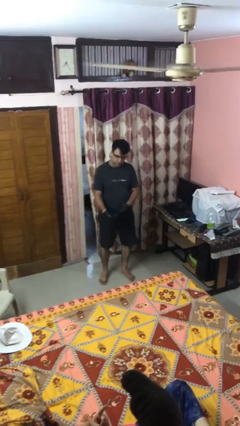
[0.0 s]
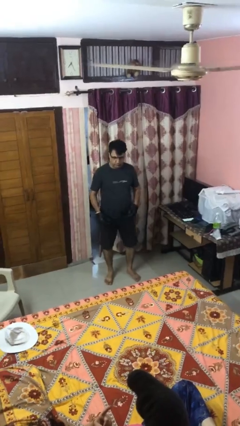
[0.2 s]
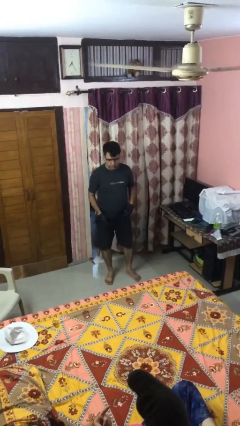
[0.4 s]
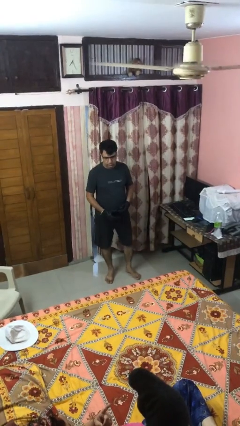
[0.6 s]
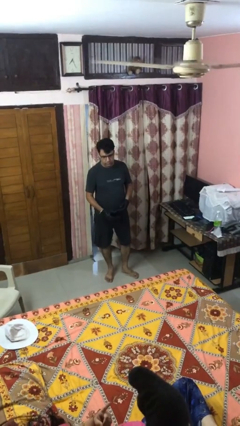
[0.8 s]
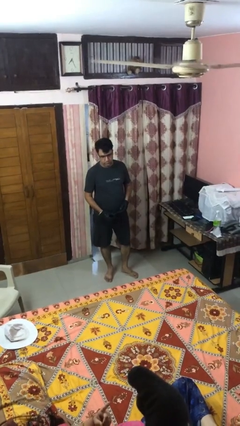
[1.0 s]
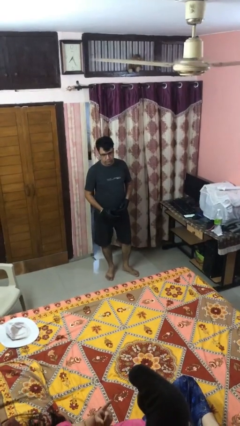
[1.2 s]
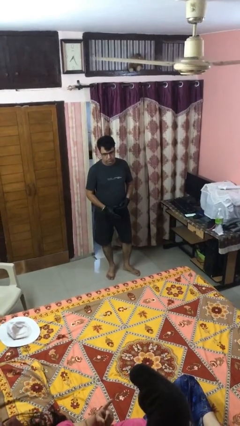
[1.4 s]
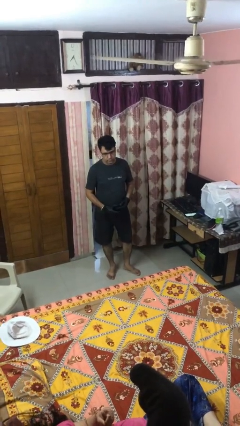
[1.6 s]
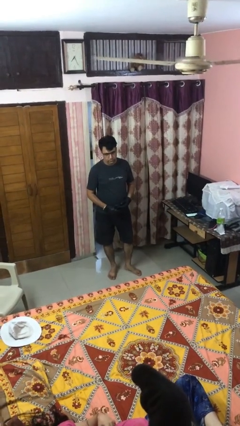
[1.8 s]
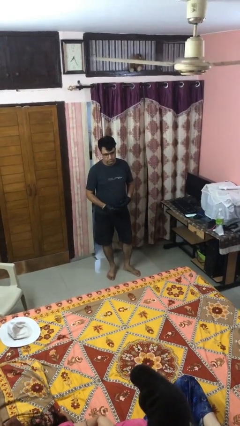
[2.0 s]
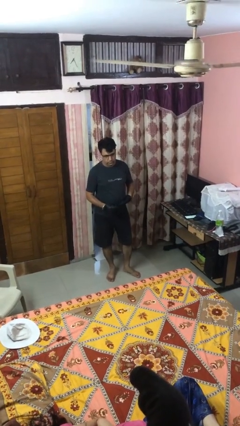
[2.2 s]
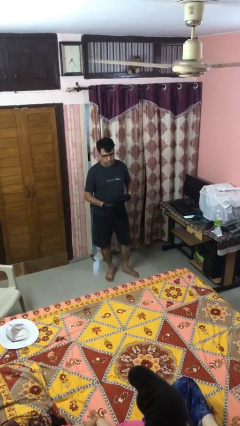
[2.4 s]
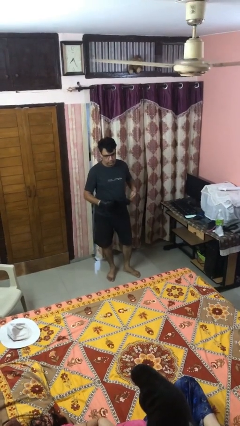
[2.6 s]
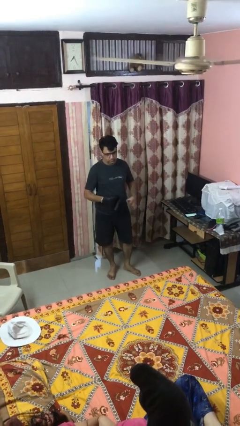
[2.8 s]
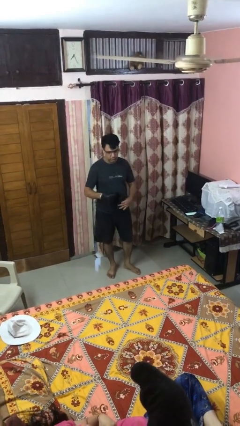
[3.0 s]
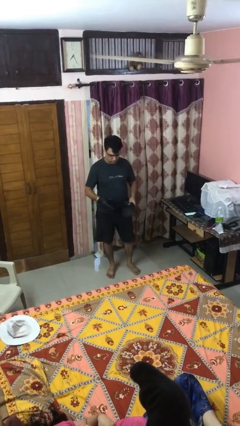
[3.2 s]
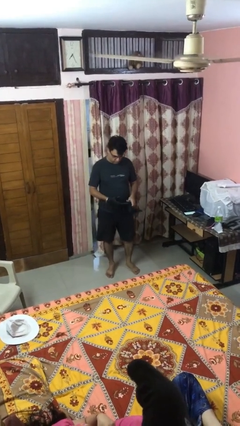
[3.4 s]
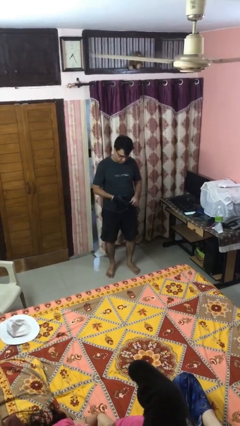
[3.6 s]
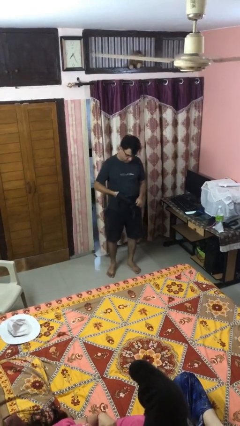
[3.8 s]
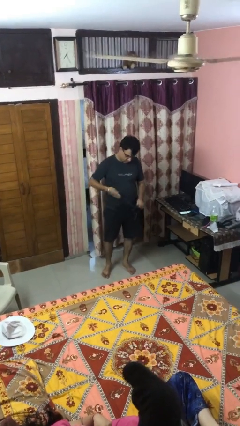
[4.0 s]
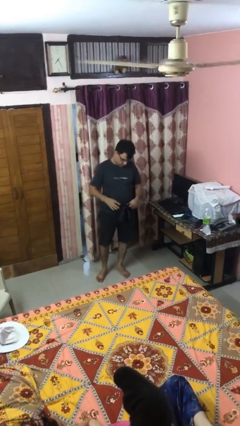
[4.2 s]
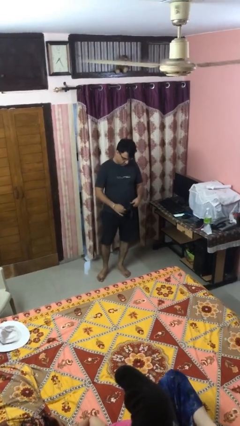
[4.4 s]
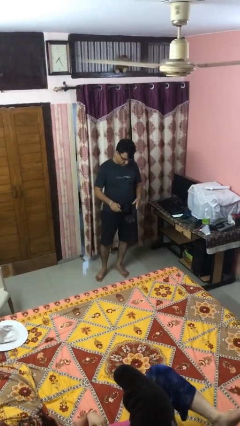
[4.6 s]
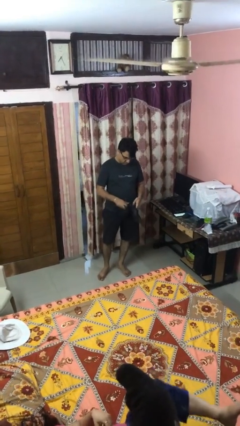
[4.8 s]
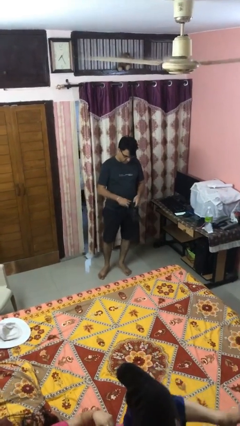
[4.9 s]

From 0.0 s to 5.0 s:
person takes off gloves

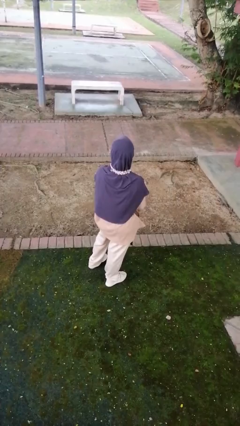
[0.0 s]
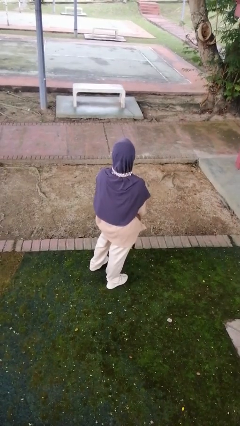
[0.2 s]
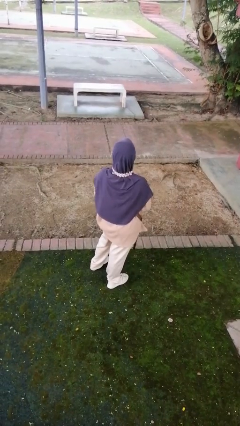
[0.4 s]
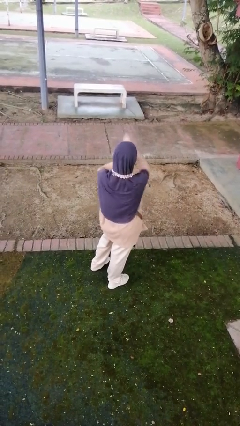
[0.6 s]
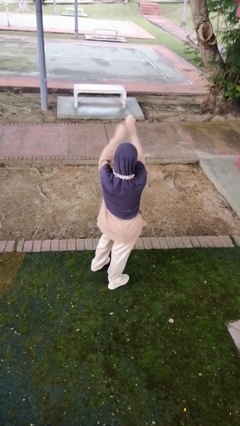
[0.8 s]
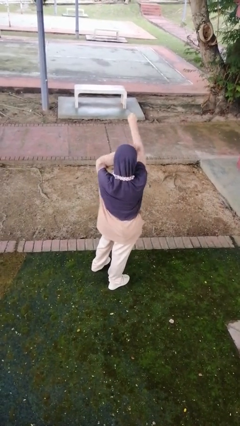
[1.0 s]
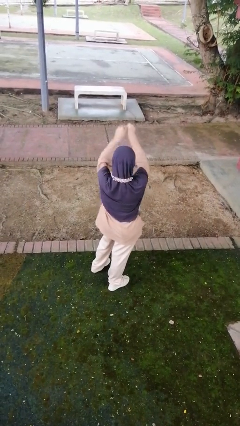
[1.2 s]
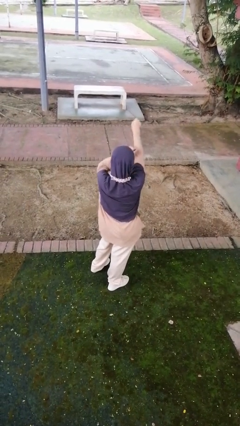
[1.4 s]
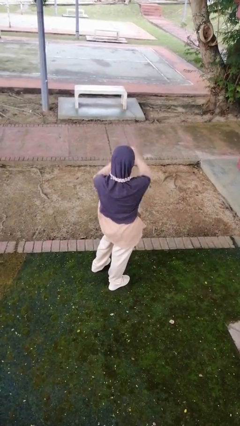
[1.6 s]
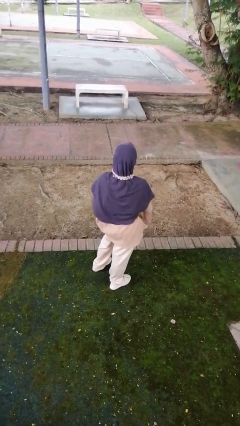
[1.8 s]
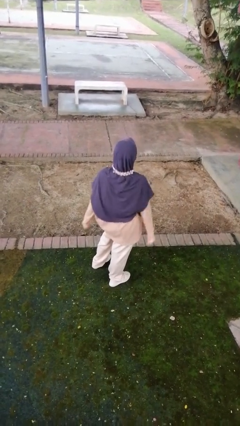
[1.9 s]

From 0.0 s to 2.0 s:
person punches

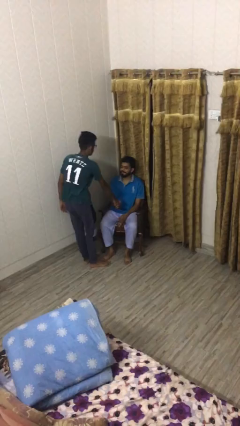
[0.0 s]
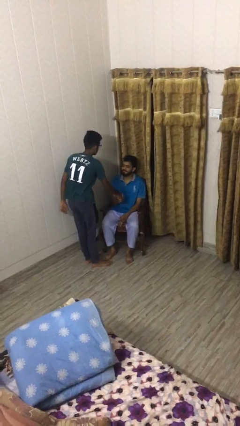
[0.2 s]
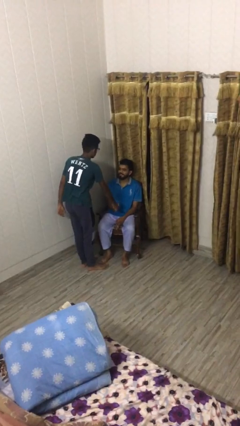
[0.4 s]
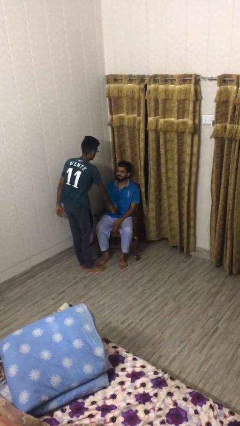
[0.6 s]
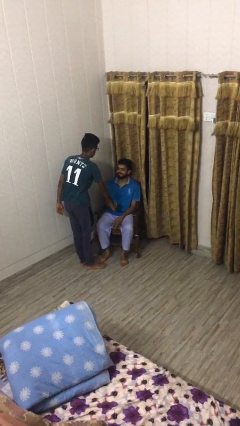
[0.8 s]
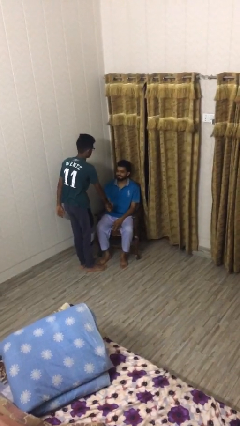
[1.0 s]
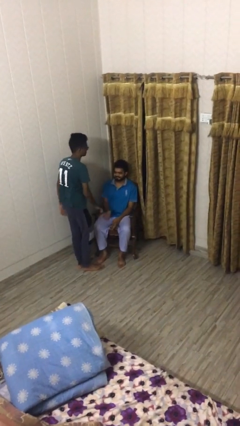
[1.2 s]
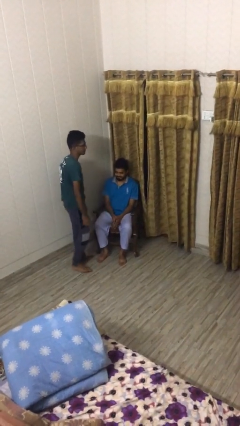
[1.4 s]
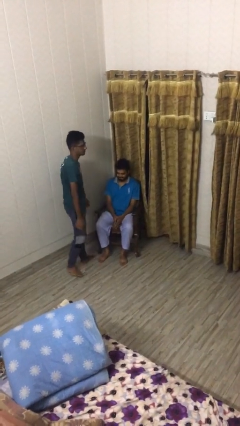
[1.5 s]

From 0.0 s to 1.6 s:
person shakes hand

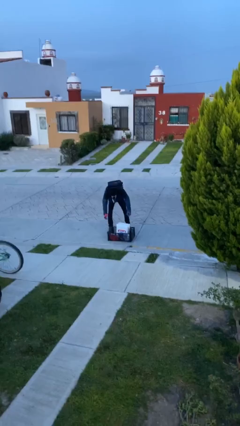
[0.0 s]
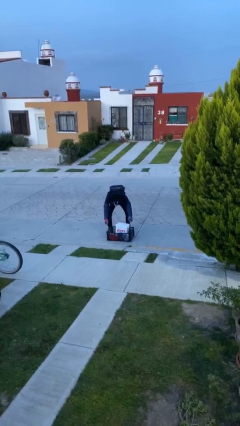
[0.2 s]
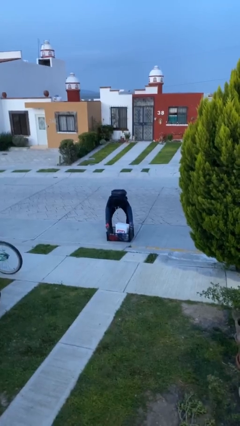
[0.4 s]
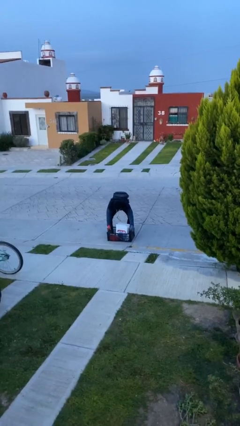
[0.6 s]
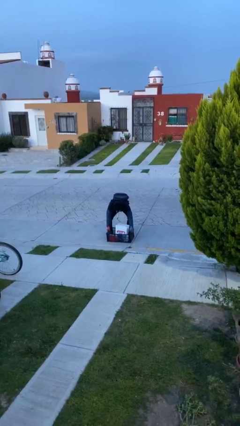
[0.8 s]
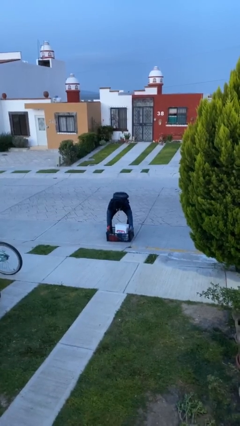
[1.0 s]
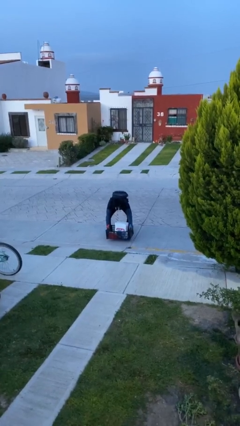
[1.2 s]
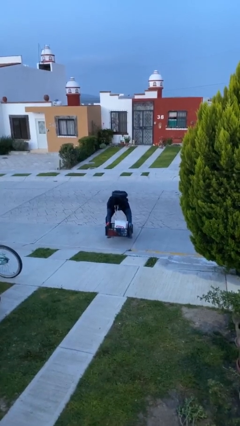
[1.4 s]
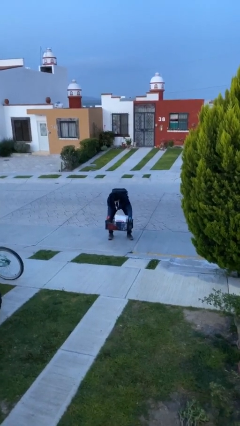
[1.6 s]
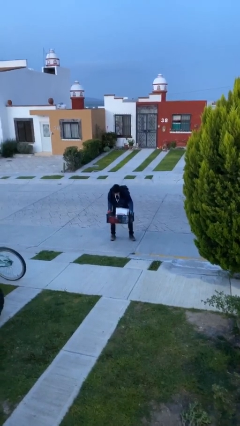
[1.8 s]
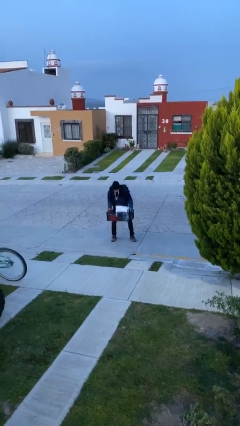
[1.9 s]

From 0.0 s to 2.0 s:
person picks up object from floor

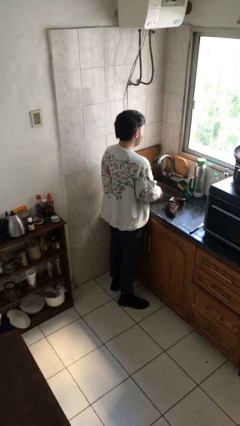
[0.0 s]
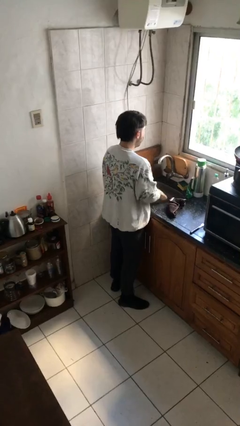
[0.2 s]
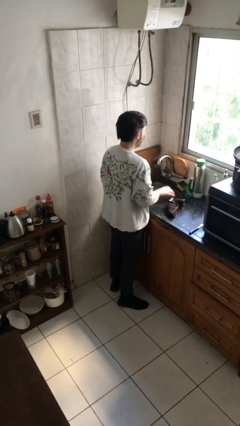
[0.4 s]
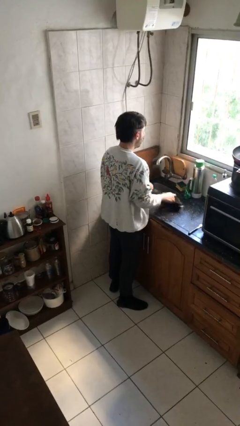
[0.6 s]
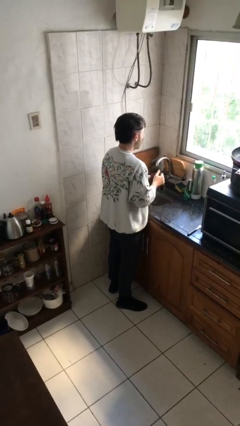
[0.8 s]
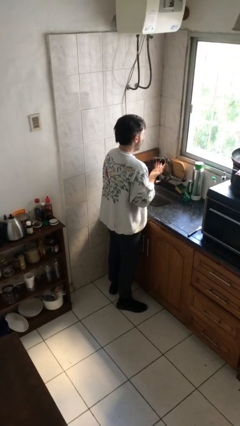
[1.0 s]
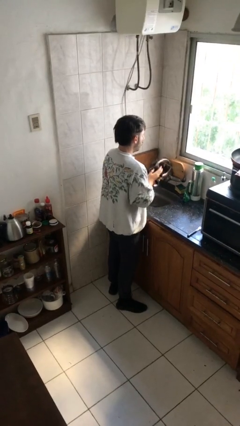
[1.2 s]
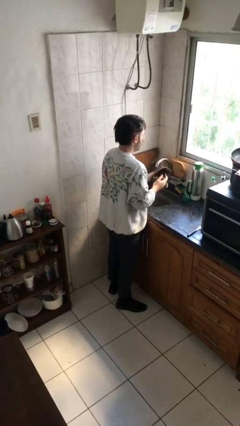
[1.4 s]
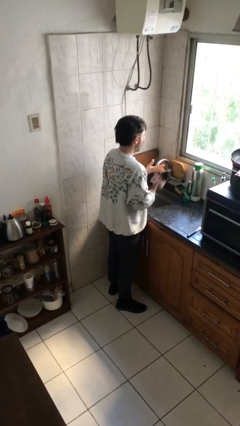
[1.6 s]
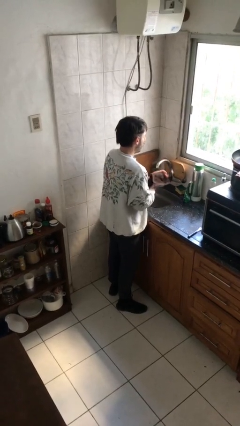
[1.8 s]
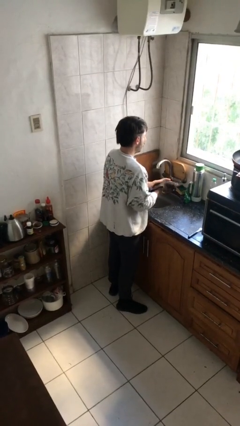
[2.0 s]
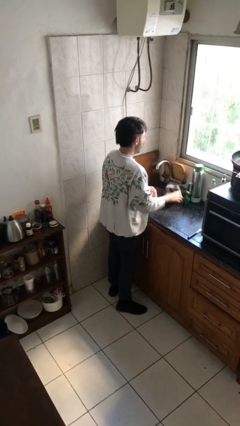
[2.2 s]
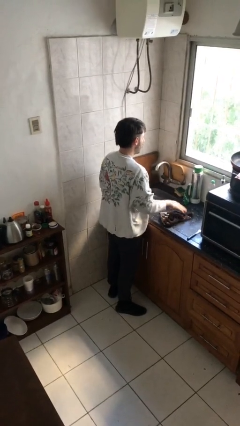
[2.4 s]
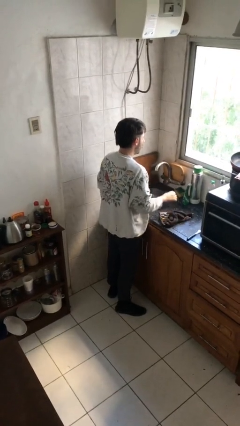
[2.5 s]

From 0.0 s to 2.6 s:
person dries hands with towel

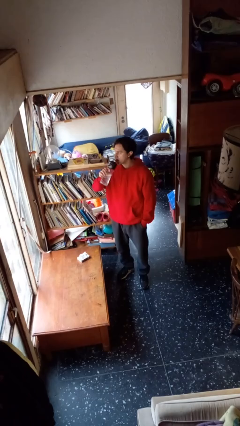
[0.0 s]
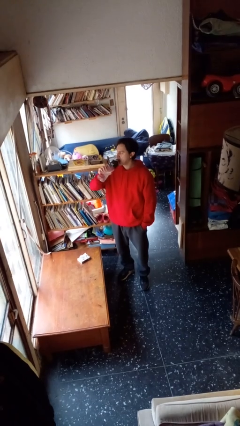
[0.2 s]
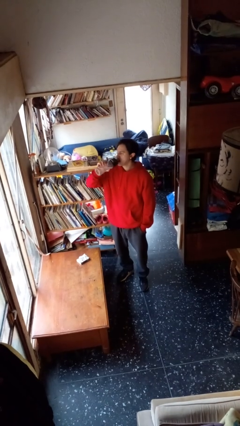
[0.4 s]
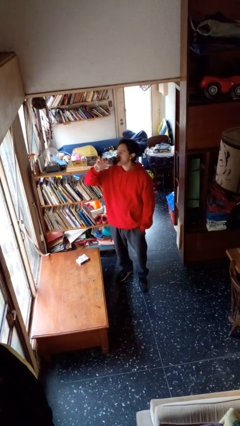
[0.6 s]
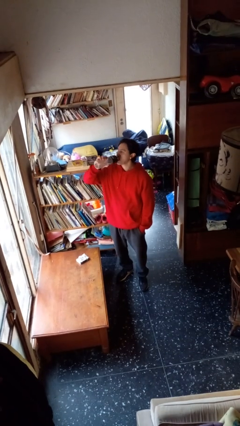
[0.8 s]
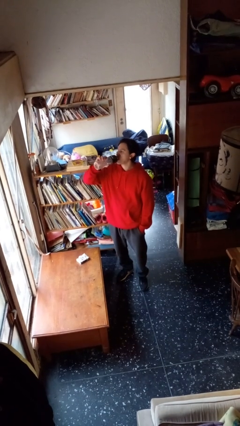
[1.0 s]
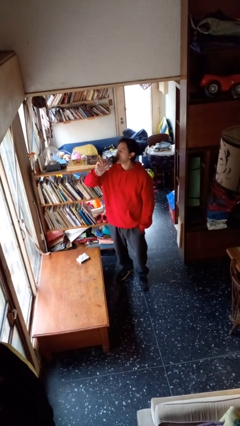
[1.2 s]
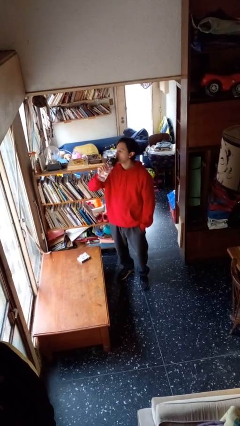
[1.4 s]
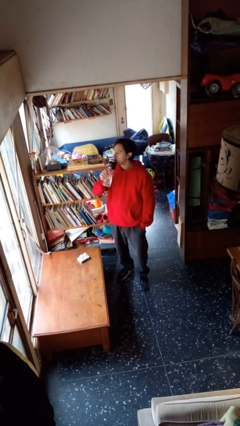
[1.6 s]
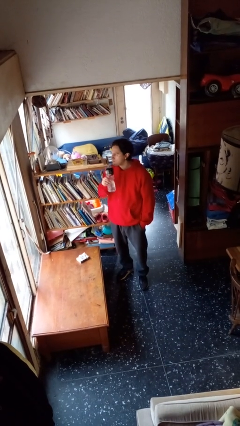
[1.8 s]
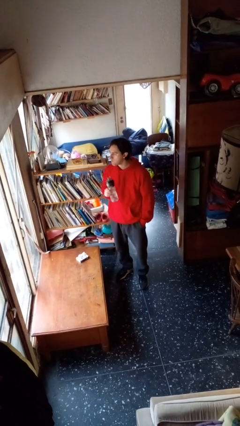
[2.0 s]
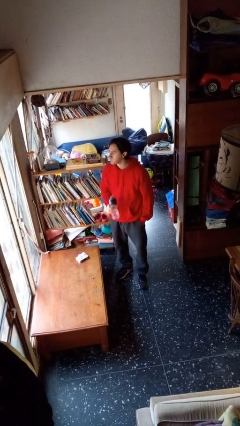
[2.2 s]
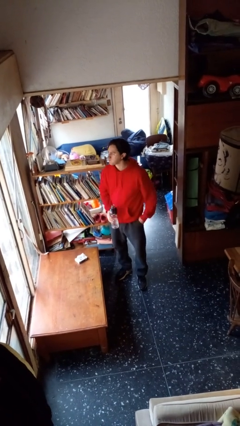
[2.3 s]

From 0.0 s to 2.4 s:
person drinks from bottle

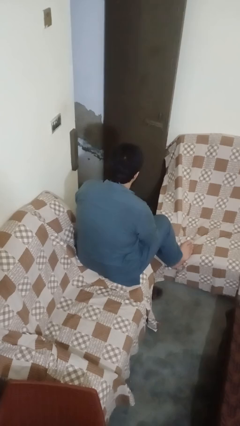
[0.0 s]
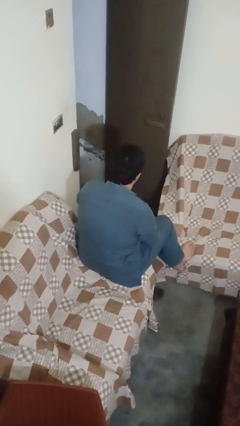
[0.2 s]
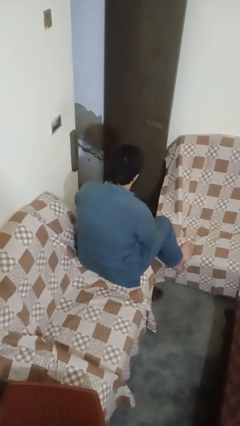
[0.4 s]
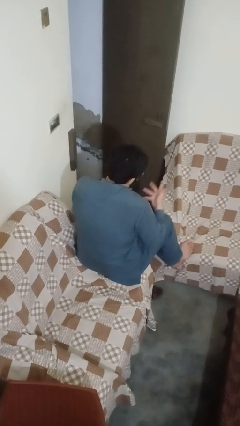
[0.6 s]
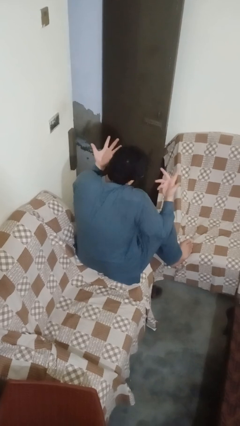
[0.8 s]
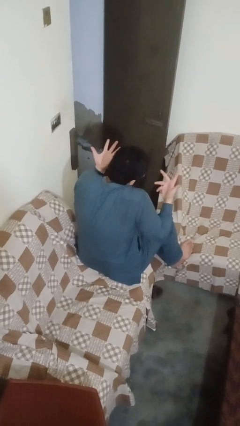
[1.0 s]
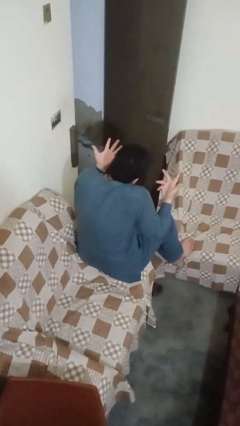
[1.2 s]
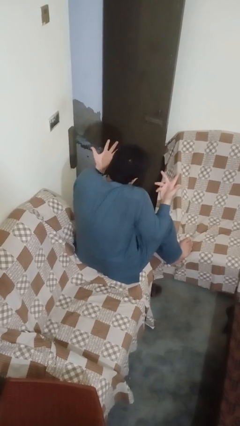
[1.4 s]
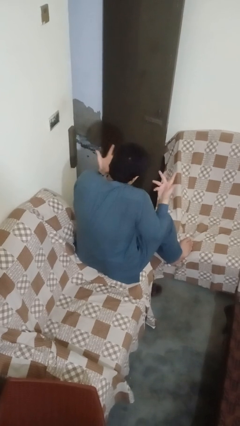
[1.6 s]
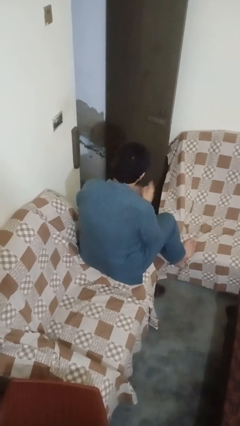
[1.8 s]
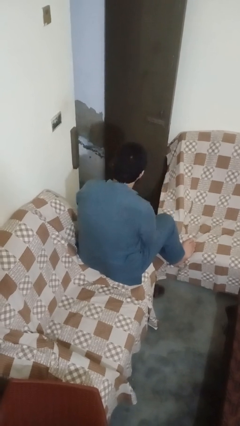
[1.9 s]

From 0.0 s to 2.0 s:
person shrugs
